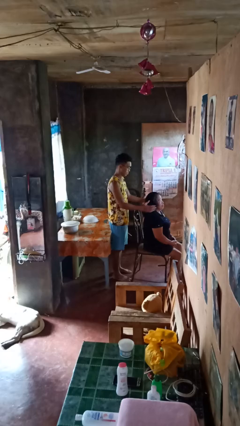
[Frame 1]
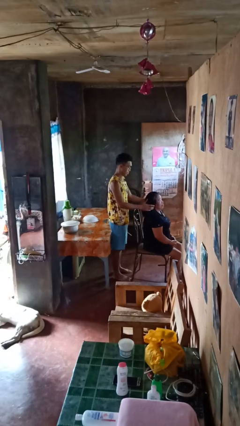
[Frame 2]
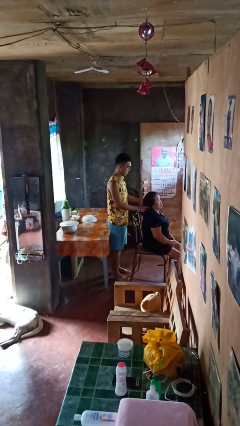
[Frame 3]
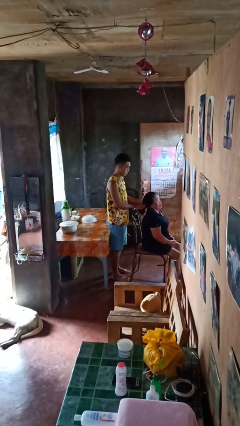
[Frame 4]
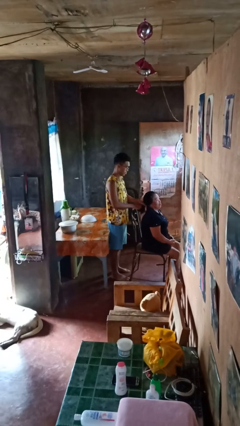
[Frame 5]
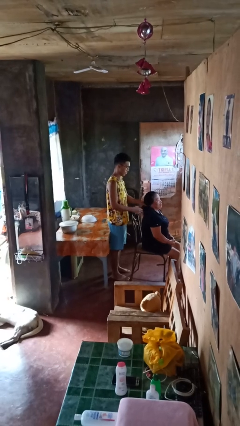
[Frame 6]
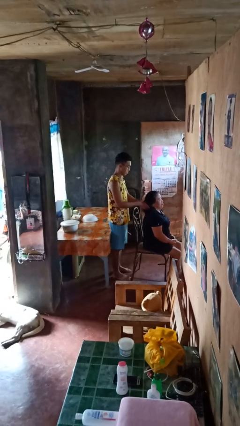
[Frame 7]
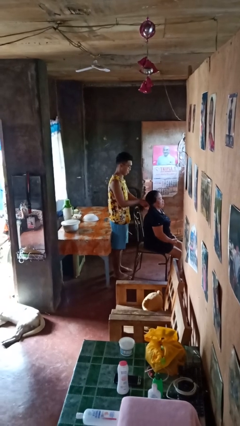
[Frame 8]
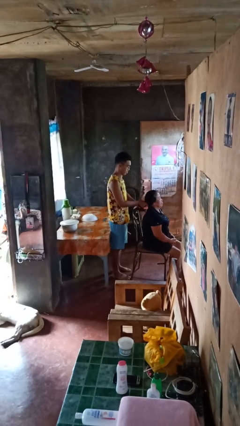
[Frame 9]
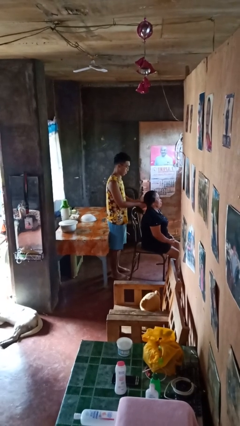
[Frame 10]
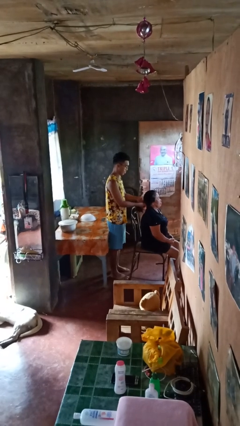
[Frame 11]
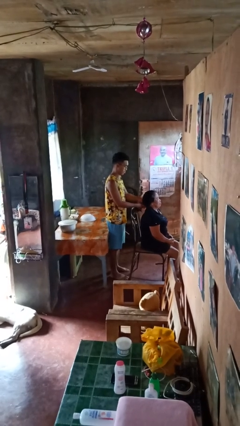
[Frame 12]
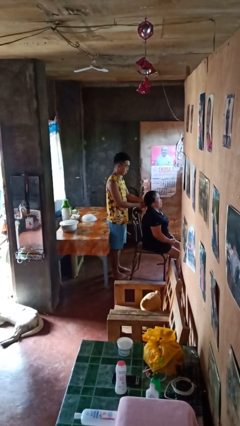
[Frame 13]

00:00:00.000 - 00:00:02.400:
person braids hair of person

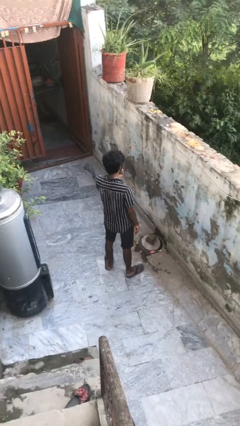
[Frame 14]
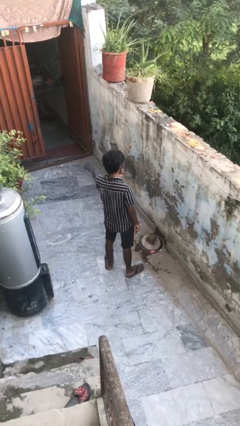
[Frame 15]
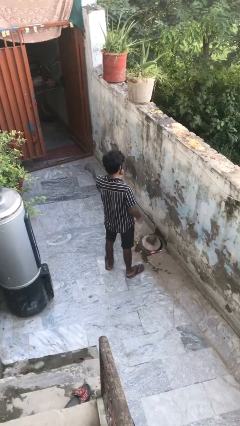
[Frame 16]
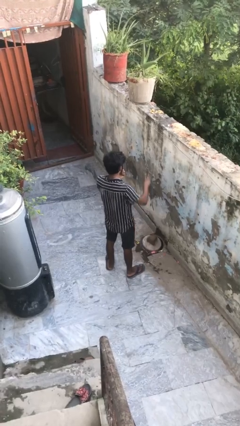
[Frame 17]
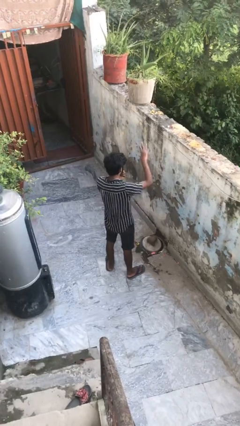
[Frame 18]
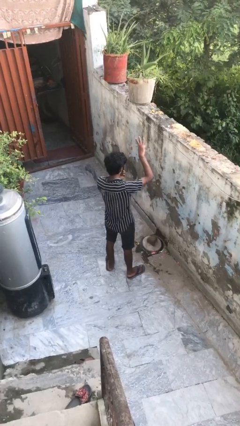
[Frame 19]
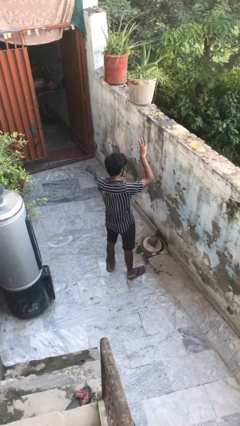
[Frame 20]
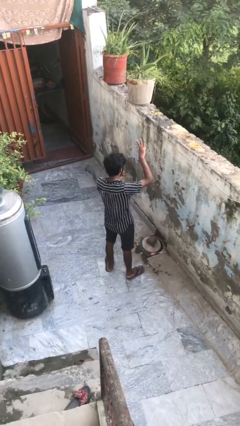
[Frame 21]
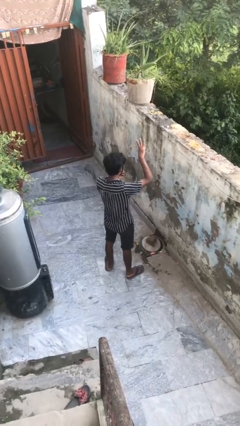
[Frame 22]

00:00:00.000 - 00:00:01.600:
person gestures number three

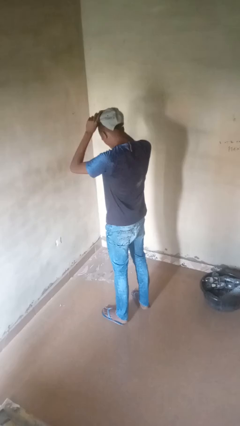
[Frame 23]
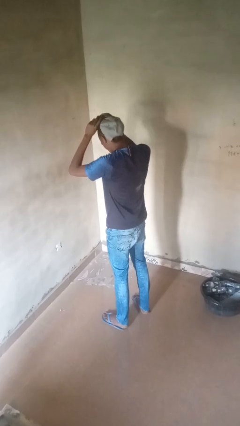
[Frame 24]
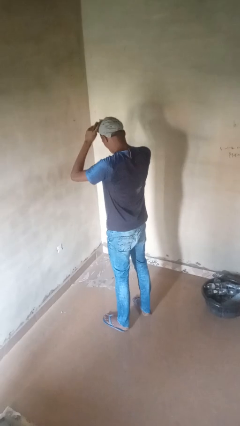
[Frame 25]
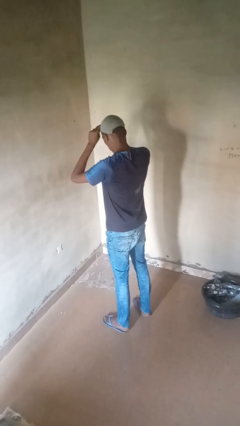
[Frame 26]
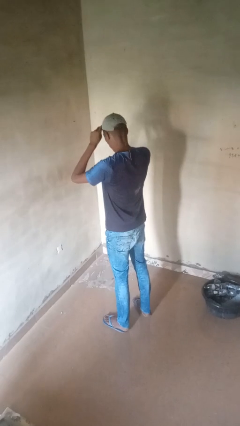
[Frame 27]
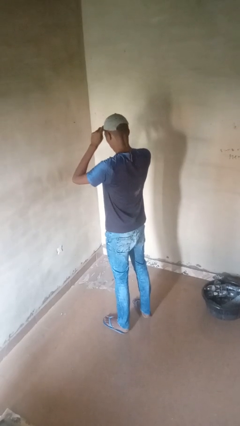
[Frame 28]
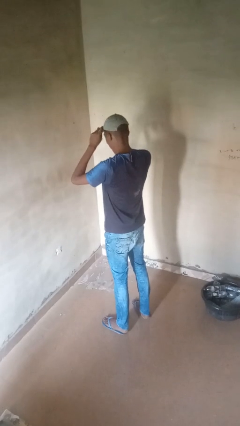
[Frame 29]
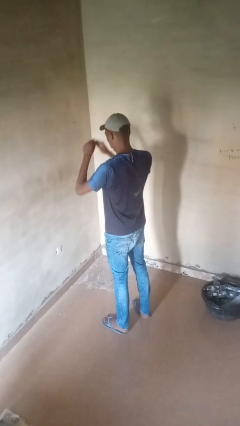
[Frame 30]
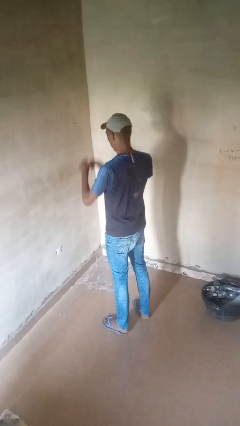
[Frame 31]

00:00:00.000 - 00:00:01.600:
person puts on hat

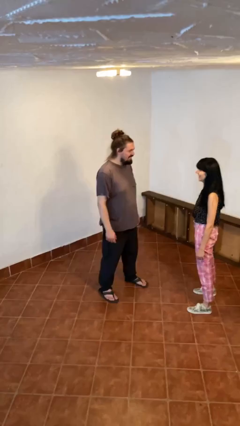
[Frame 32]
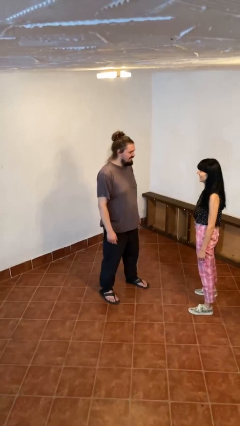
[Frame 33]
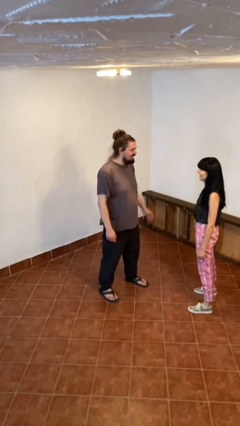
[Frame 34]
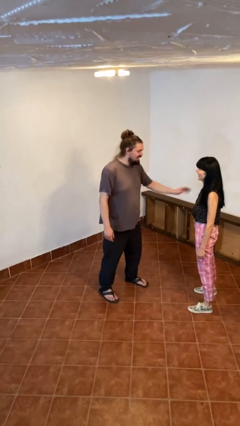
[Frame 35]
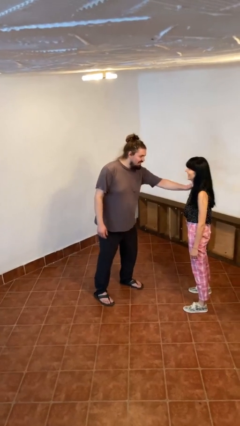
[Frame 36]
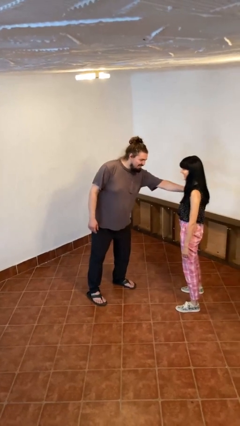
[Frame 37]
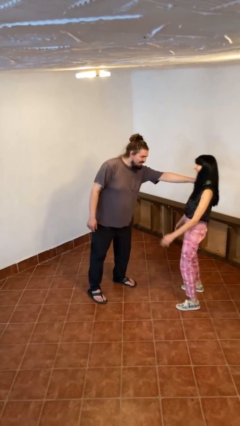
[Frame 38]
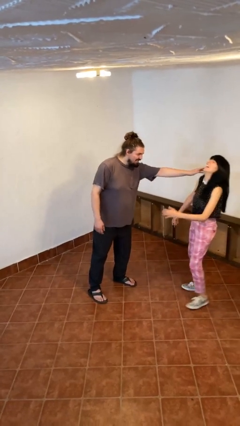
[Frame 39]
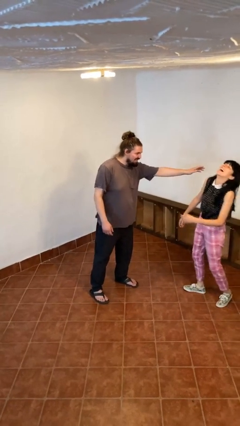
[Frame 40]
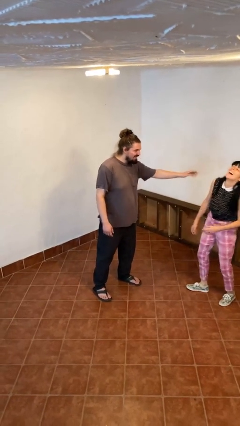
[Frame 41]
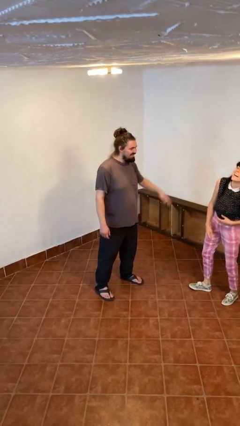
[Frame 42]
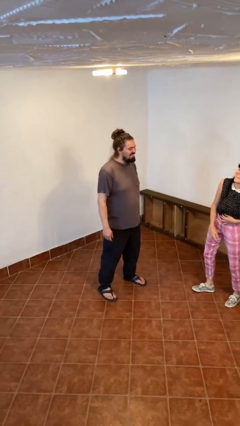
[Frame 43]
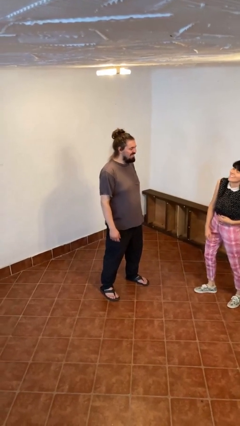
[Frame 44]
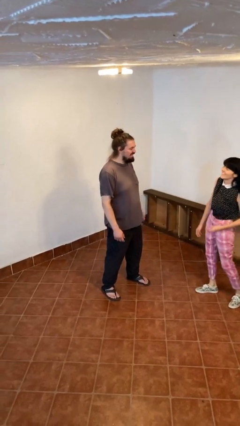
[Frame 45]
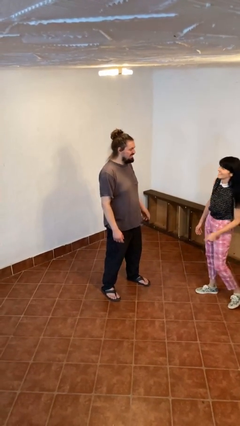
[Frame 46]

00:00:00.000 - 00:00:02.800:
person shoves person

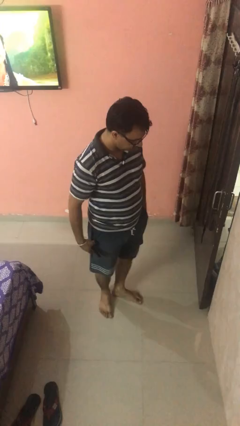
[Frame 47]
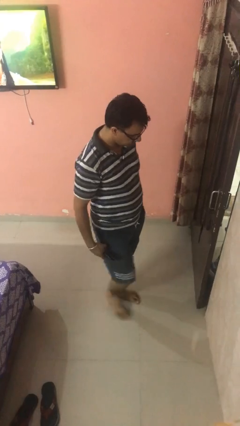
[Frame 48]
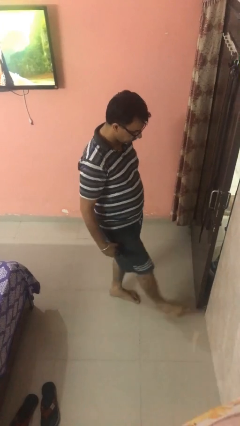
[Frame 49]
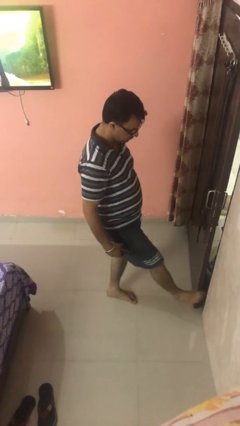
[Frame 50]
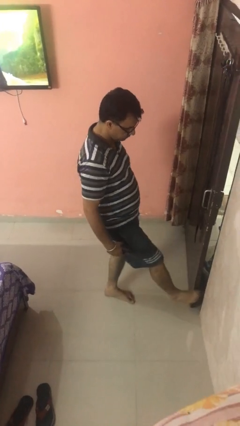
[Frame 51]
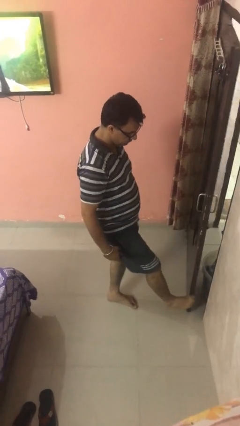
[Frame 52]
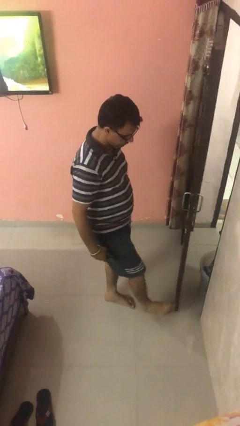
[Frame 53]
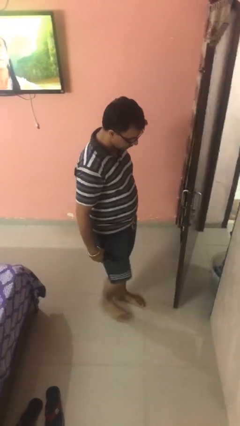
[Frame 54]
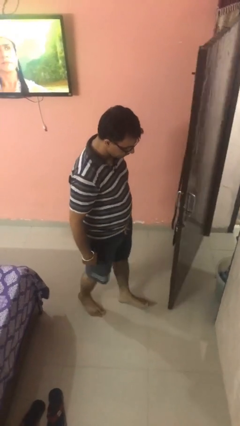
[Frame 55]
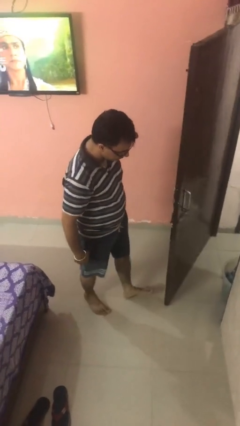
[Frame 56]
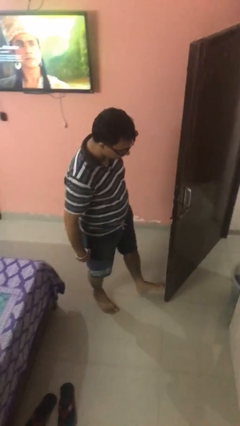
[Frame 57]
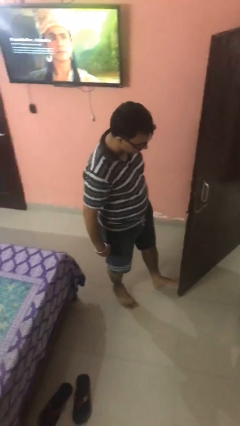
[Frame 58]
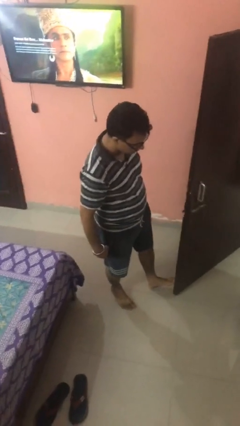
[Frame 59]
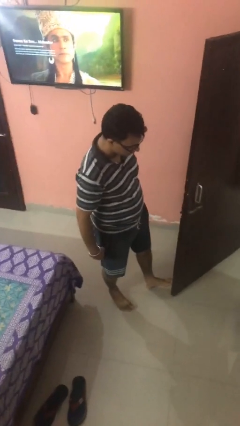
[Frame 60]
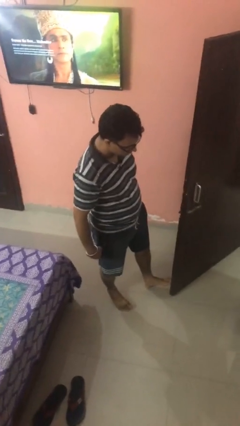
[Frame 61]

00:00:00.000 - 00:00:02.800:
person opens facility door

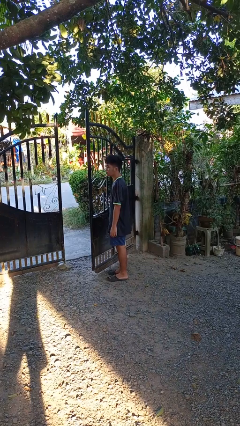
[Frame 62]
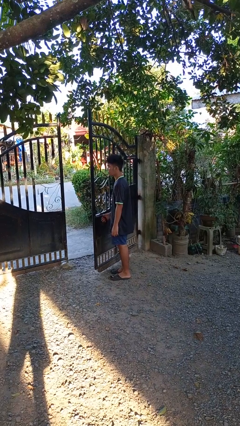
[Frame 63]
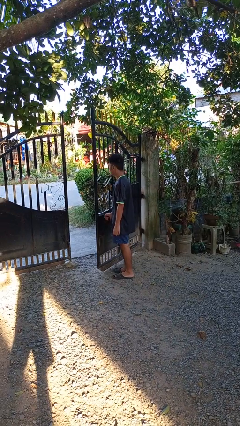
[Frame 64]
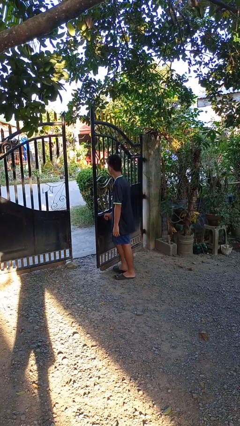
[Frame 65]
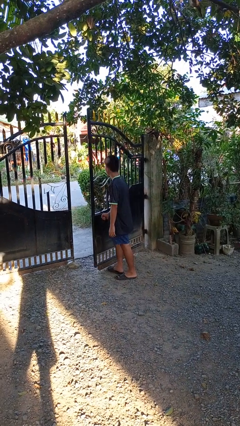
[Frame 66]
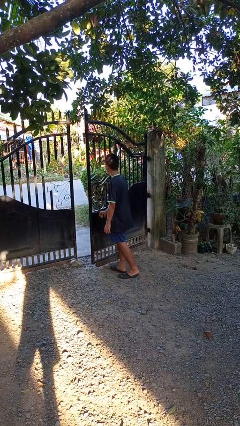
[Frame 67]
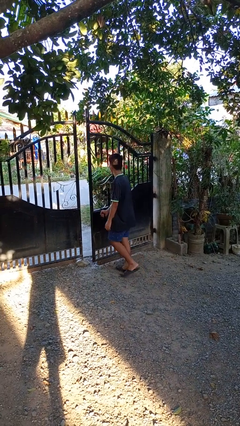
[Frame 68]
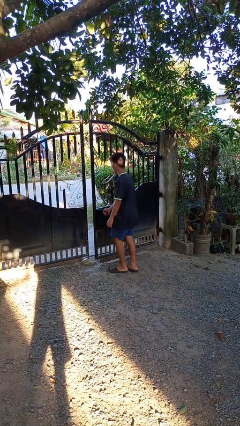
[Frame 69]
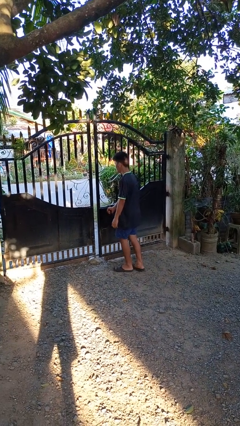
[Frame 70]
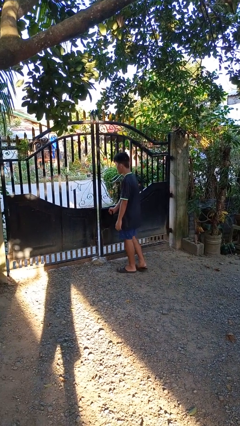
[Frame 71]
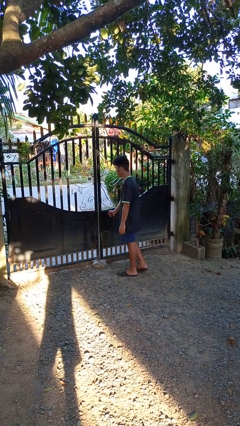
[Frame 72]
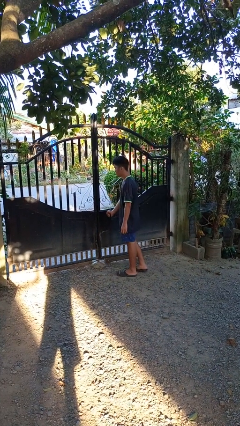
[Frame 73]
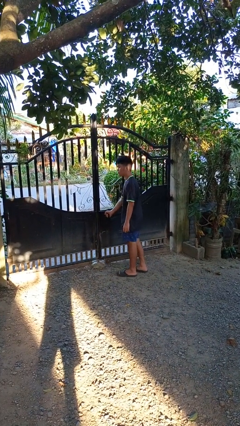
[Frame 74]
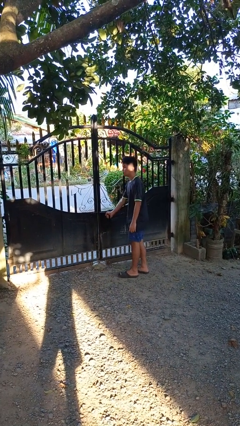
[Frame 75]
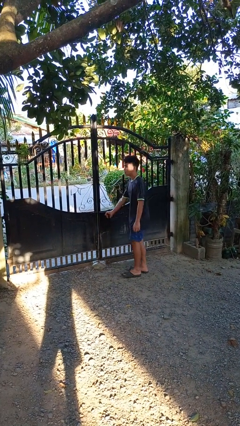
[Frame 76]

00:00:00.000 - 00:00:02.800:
person closes gate

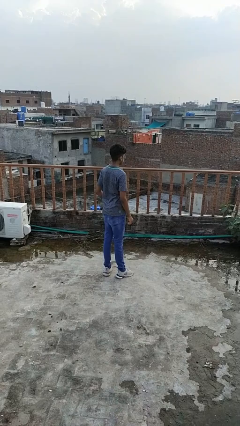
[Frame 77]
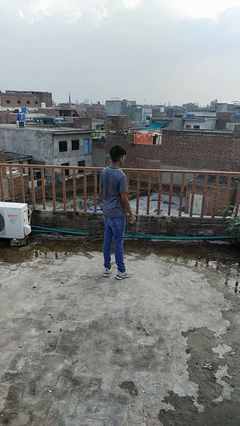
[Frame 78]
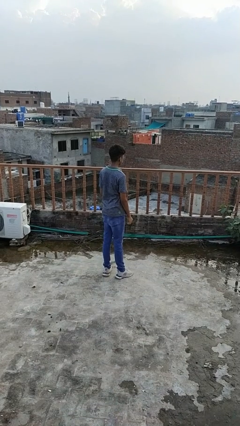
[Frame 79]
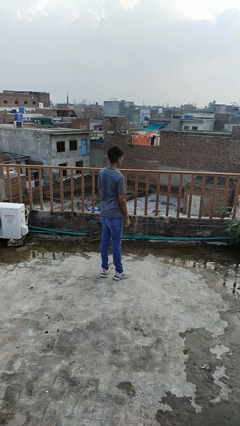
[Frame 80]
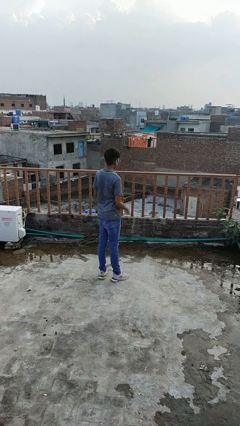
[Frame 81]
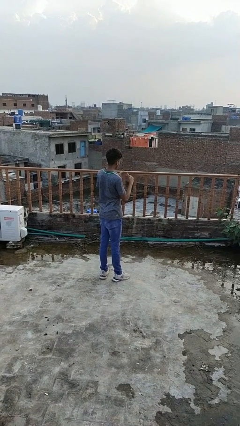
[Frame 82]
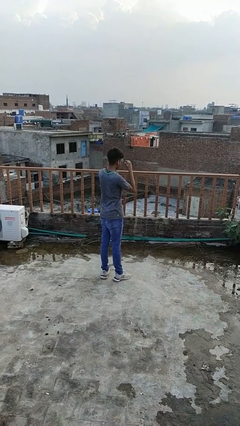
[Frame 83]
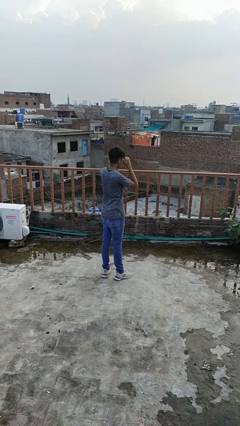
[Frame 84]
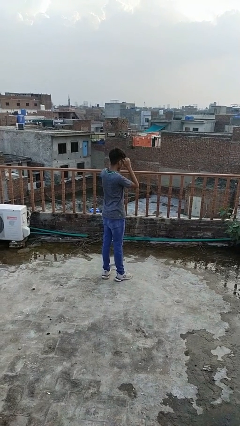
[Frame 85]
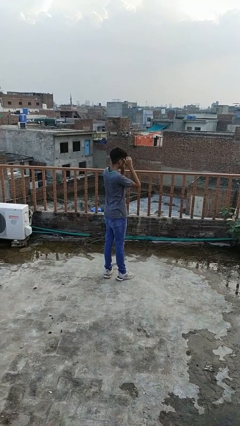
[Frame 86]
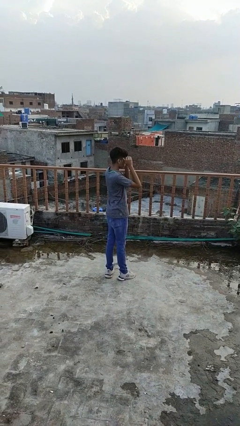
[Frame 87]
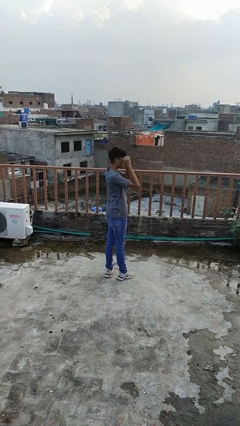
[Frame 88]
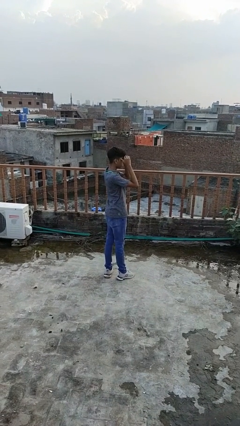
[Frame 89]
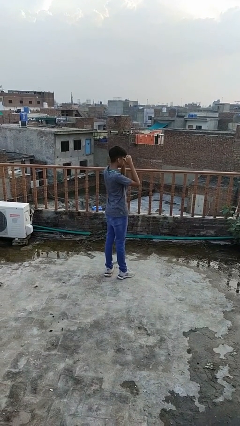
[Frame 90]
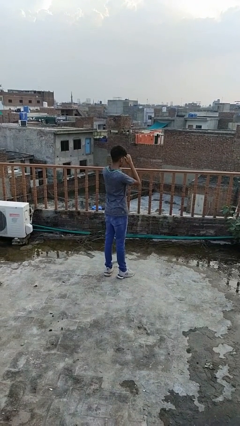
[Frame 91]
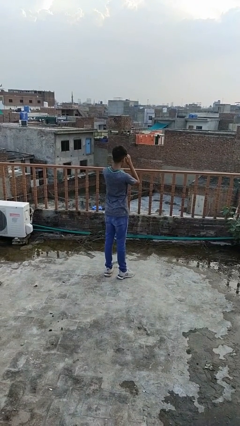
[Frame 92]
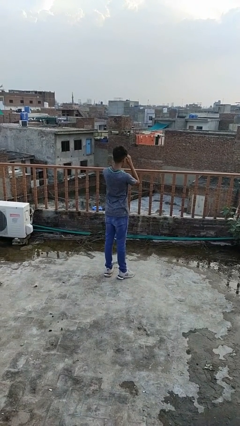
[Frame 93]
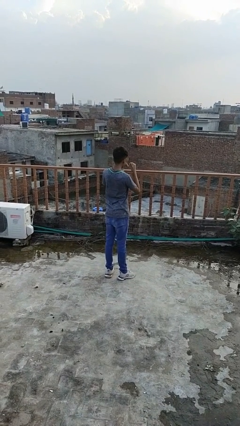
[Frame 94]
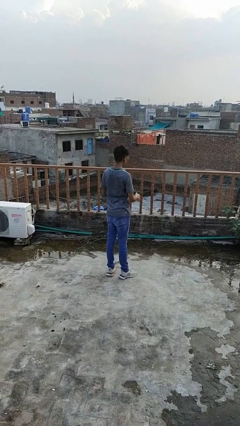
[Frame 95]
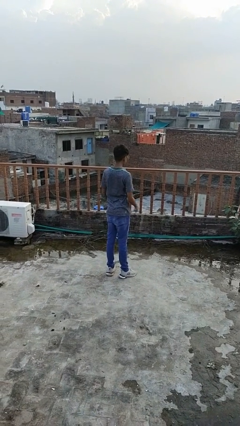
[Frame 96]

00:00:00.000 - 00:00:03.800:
person shades eyes
